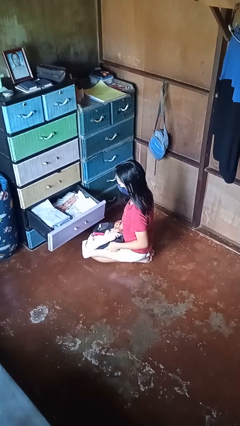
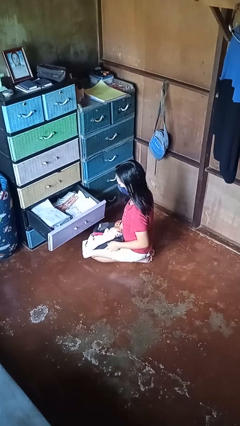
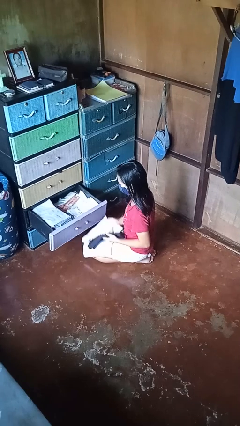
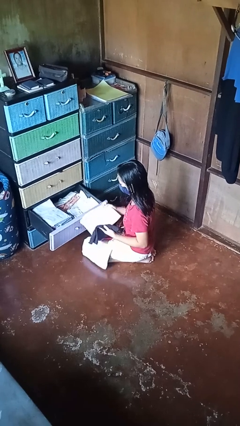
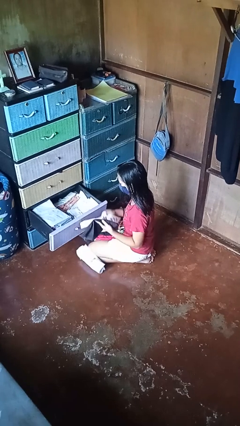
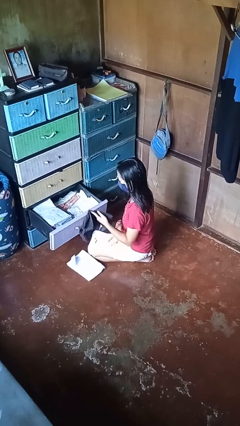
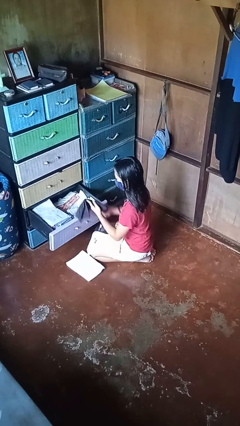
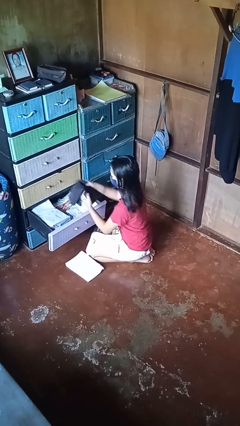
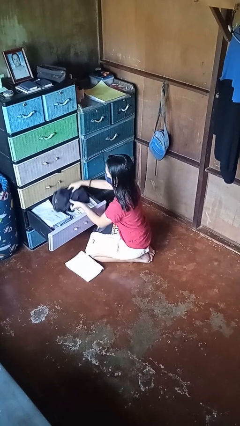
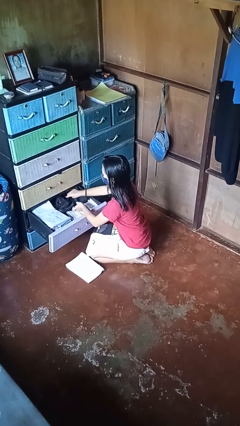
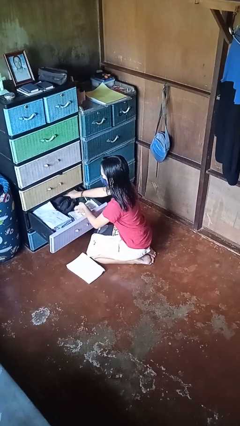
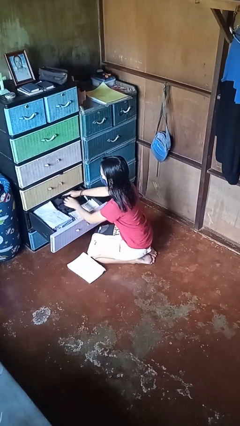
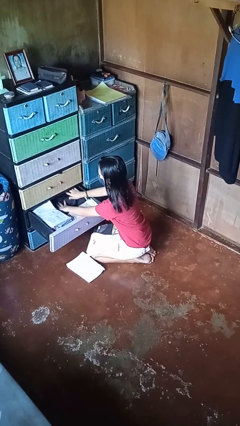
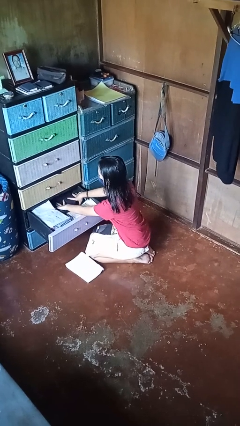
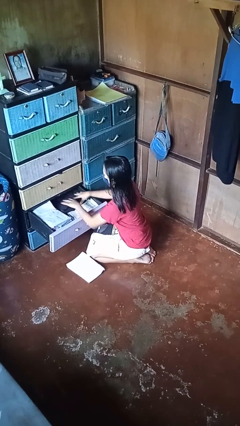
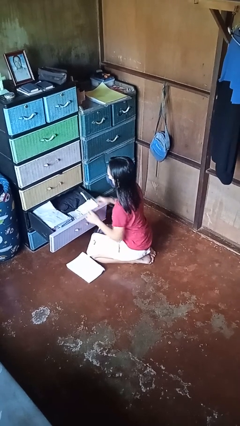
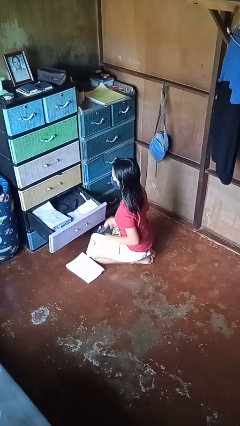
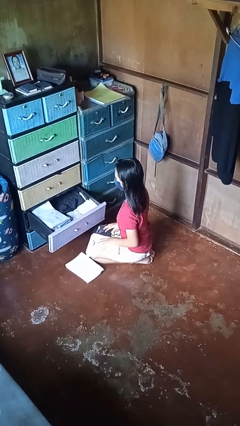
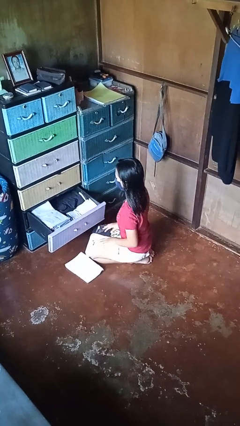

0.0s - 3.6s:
person puts clothes into dresser

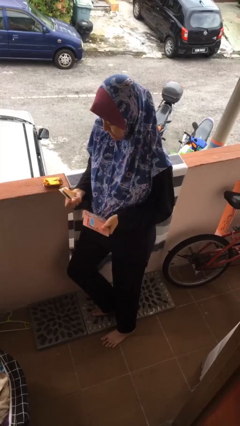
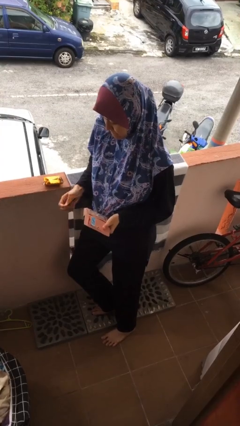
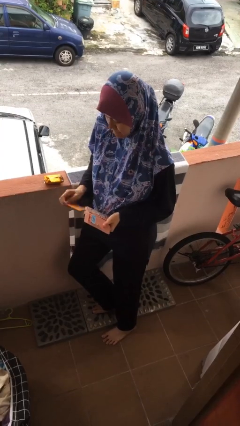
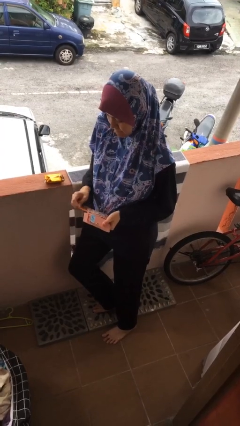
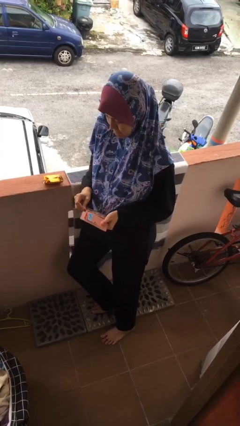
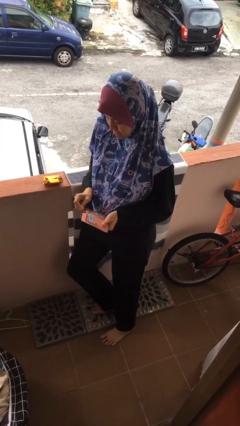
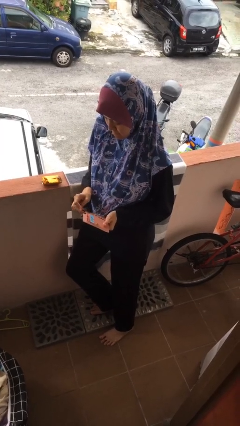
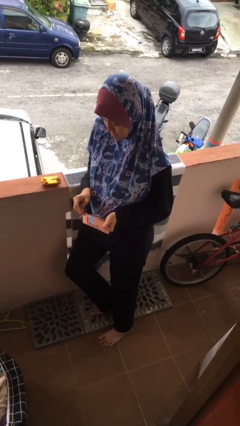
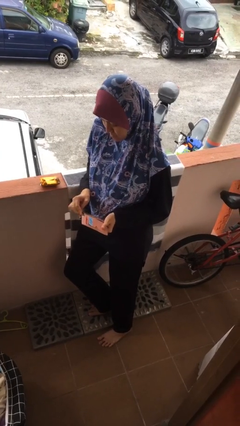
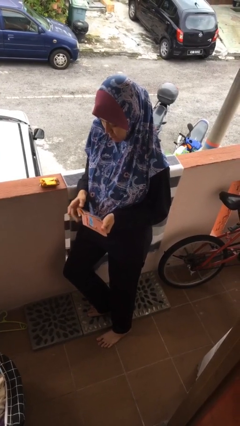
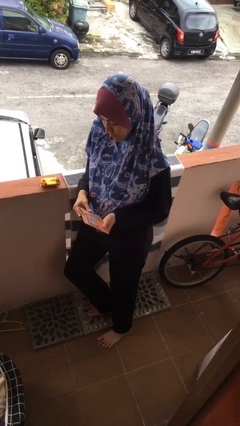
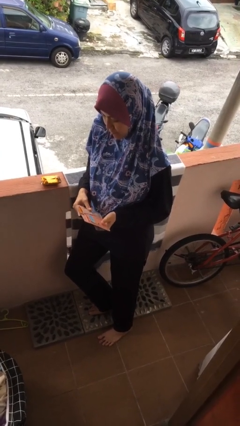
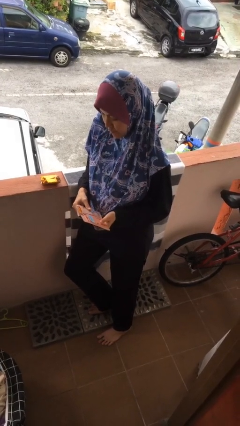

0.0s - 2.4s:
person puts object into purse

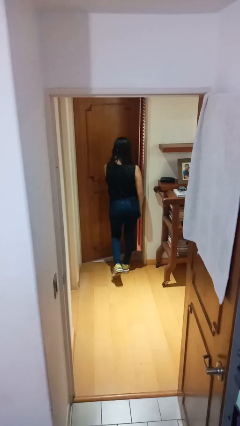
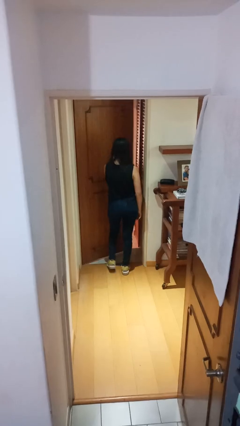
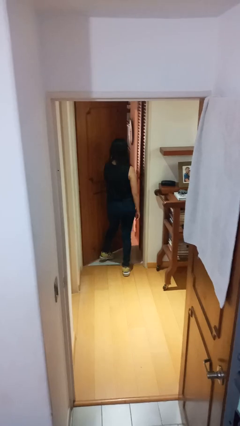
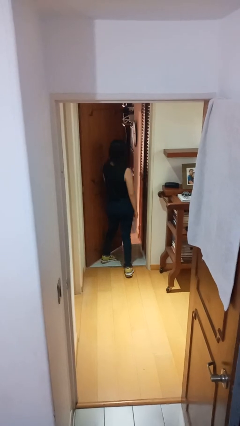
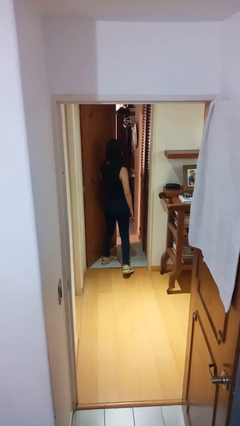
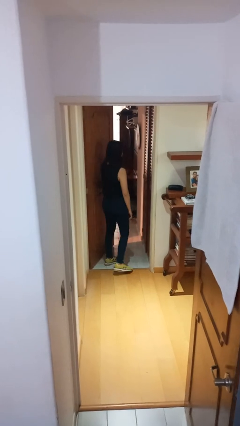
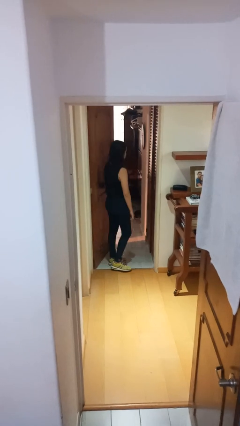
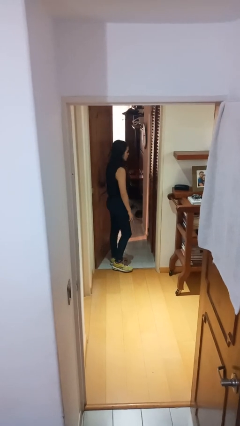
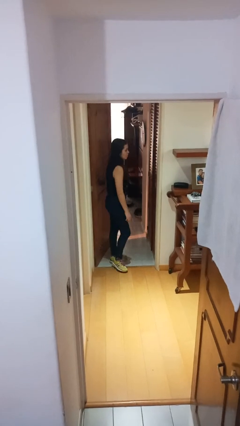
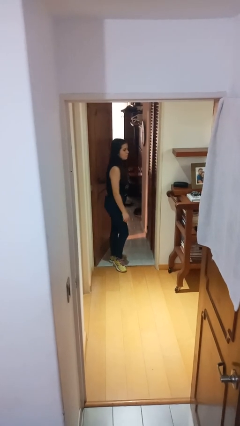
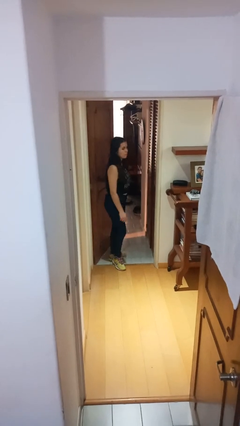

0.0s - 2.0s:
person opens facility door

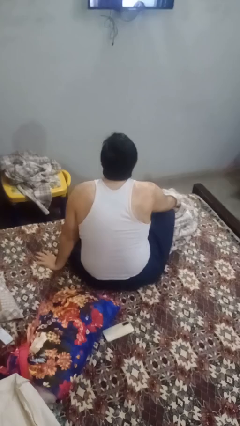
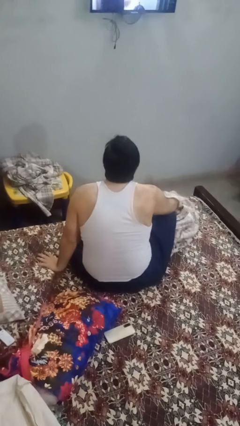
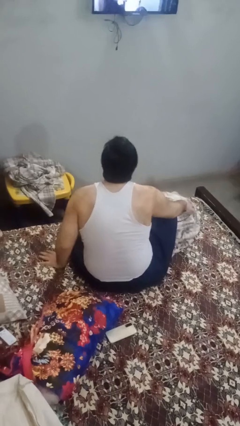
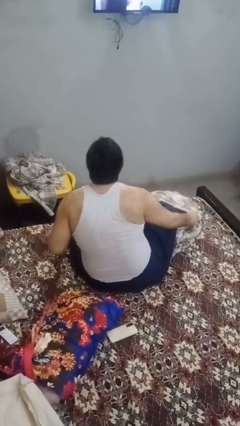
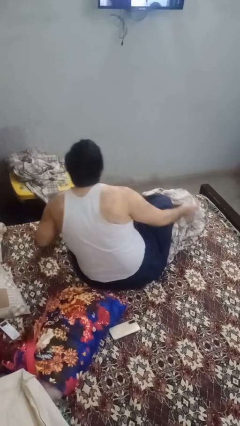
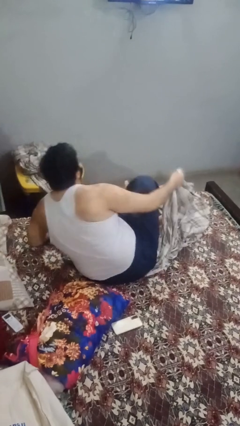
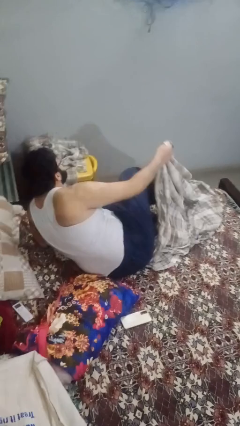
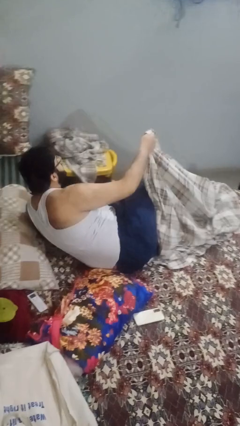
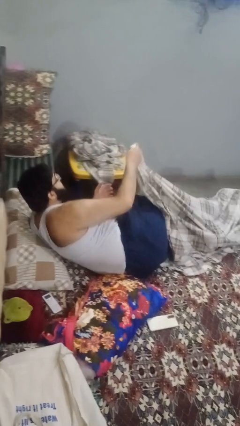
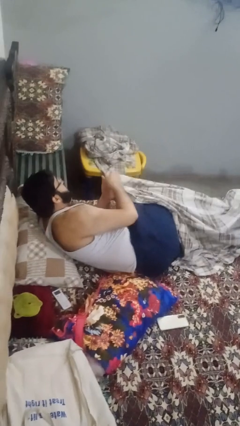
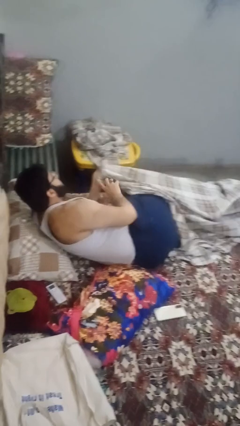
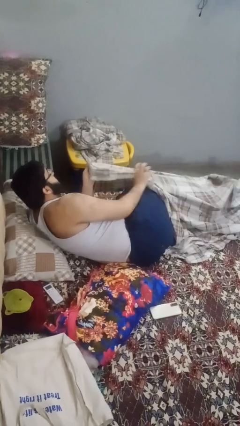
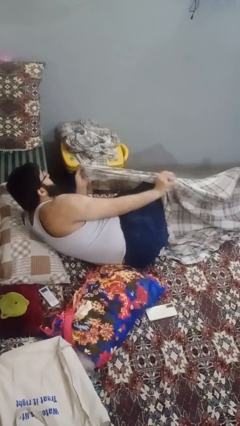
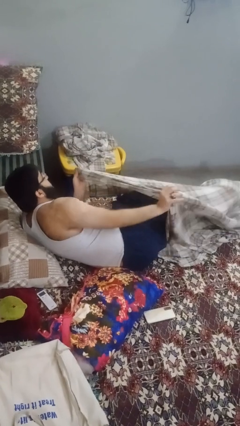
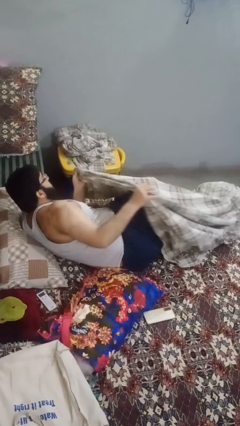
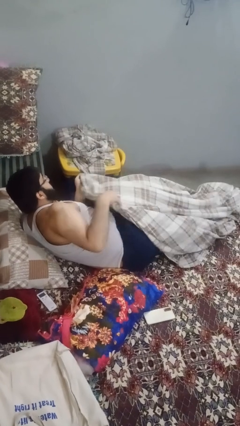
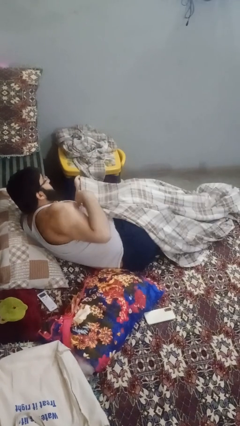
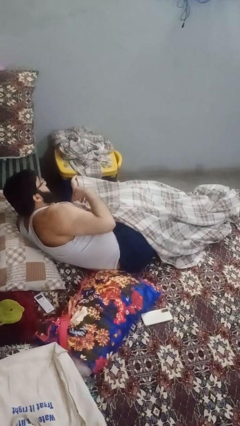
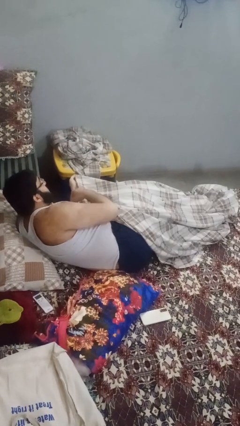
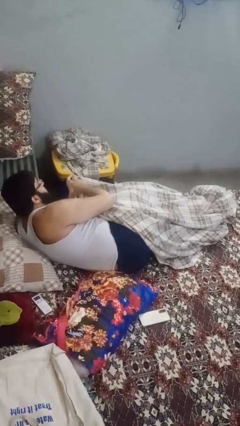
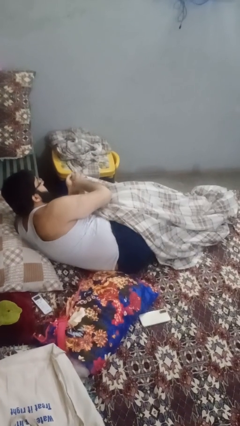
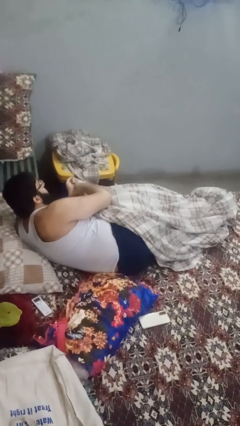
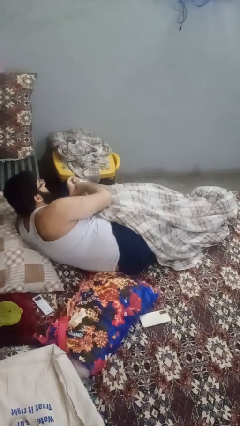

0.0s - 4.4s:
person covers with blanket

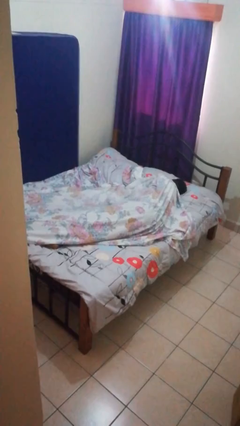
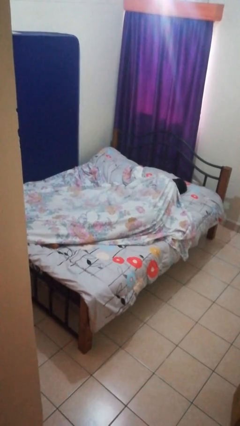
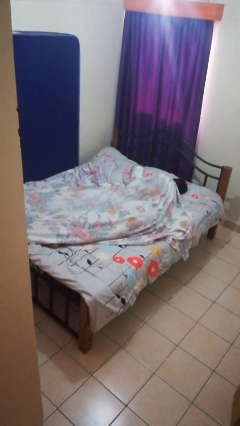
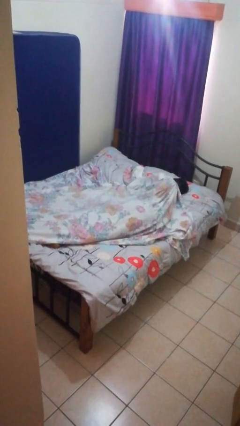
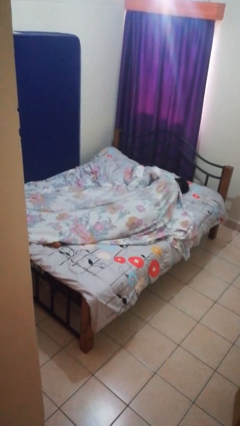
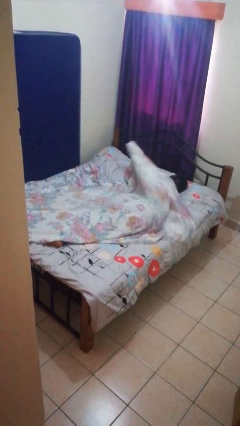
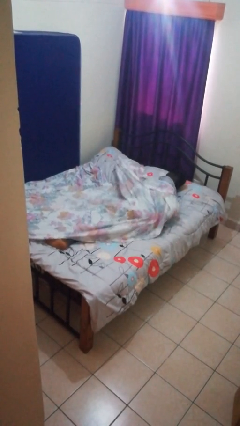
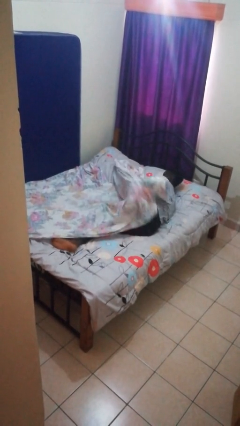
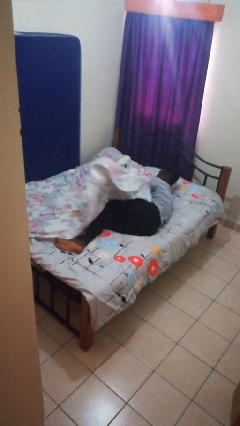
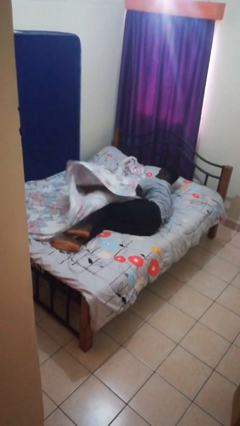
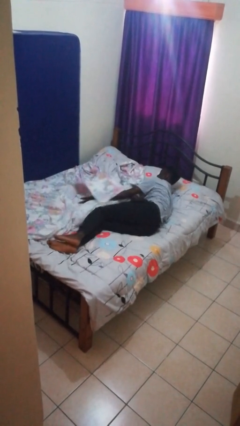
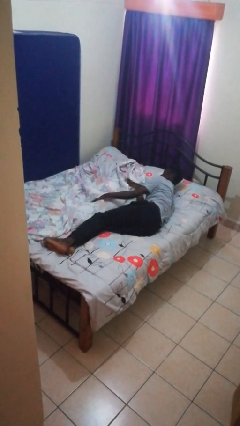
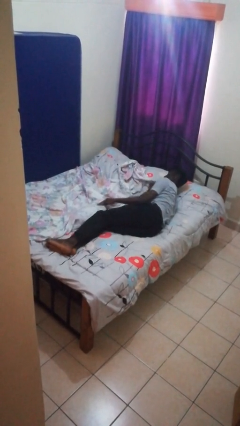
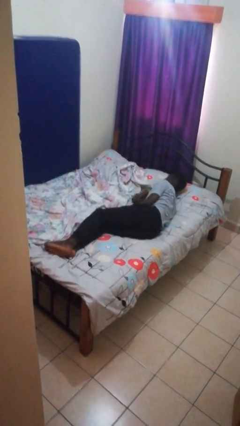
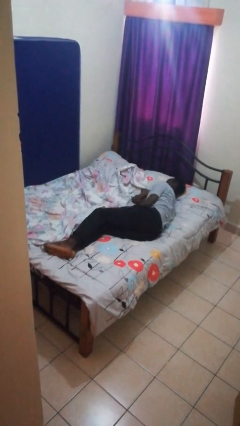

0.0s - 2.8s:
person uncovers with bedsheets

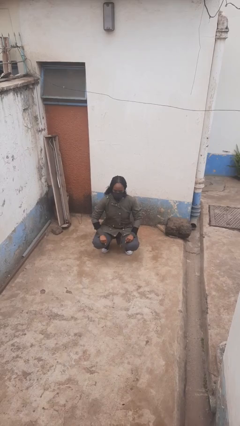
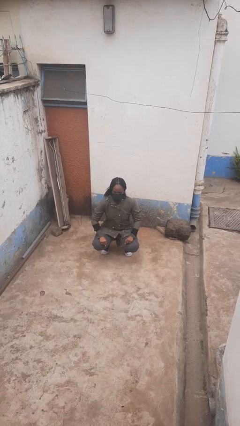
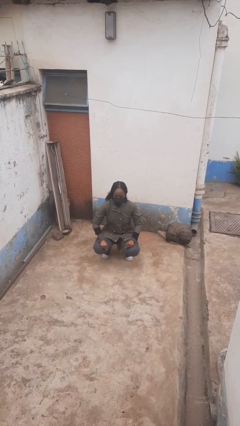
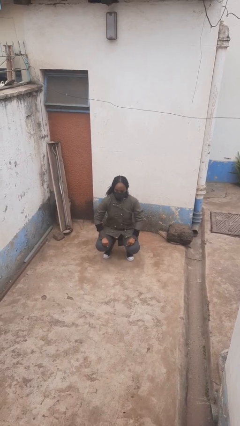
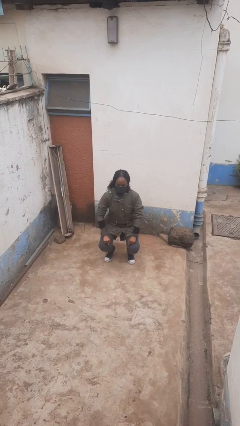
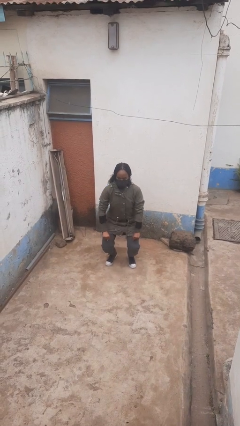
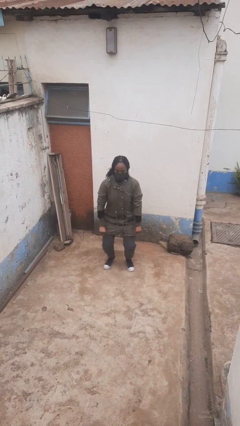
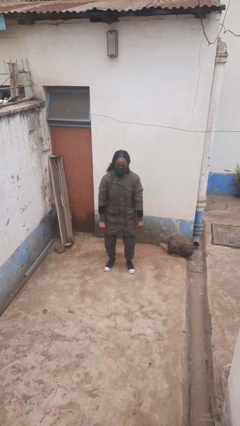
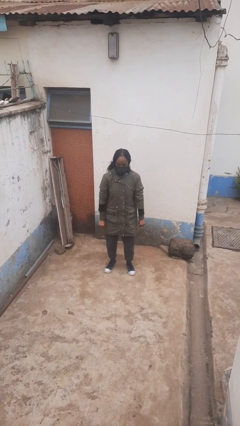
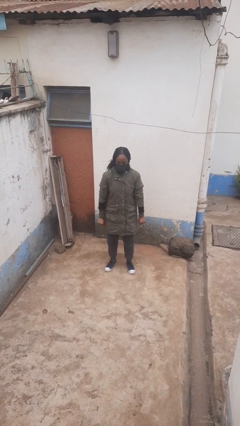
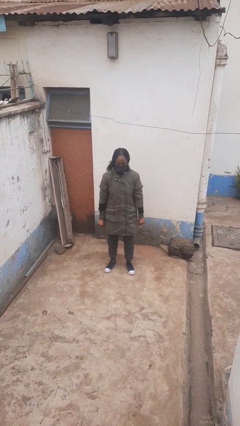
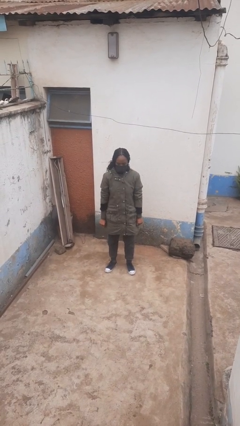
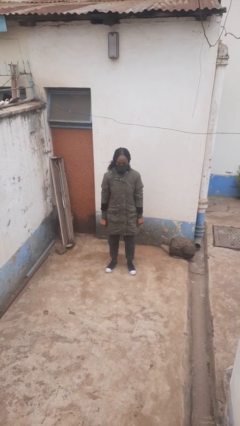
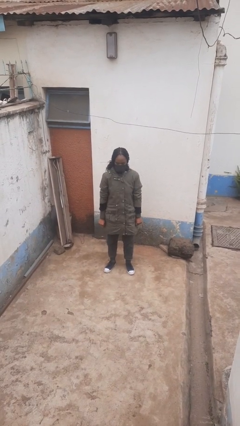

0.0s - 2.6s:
person stands up
